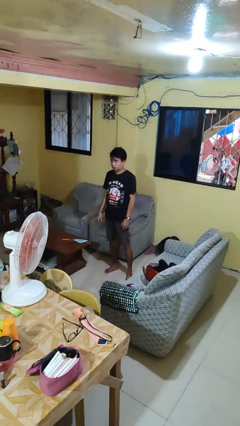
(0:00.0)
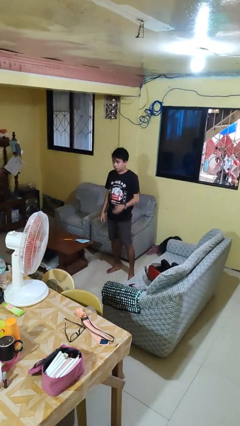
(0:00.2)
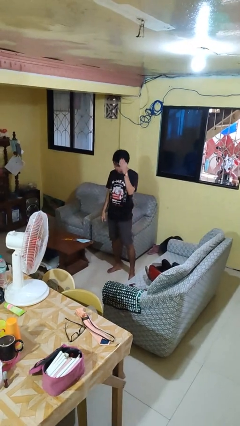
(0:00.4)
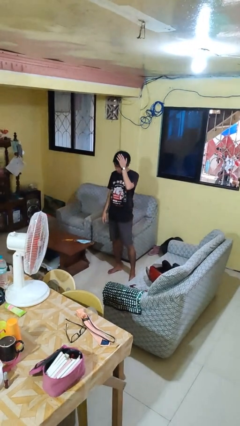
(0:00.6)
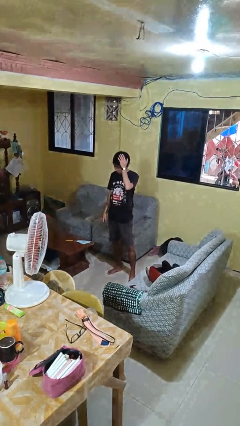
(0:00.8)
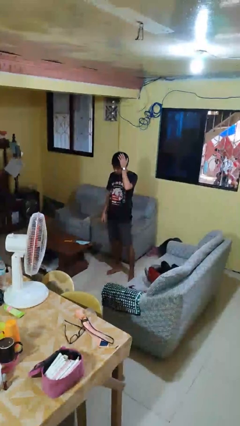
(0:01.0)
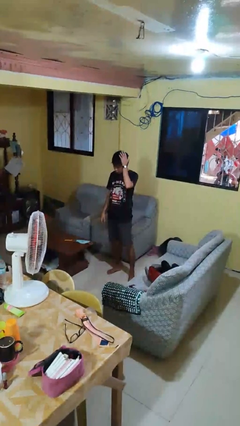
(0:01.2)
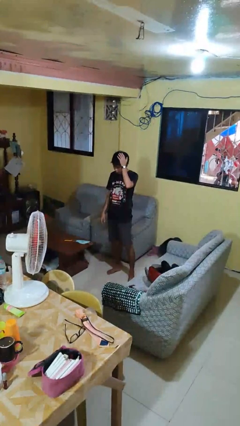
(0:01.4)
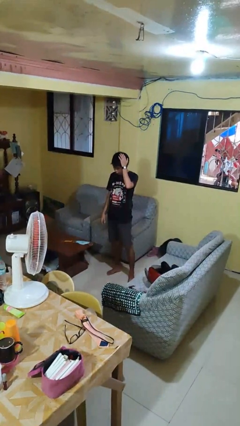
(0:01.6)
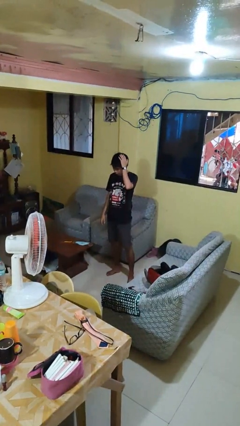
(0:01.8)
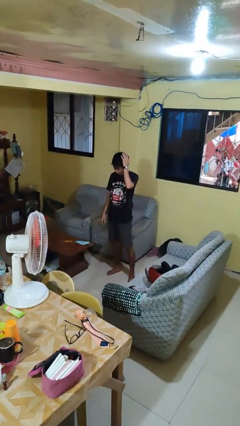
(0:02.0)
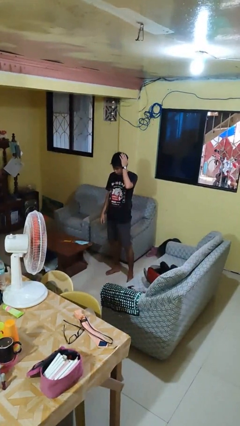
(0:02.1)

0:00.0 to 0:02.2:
person pats head

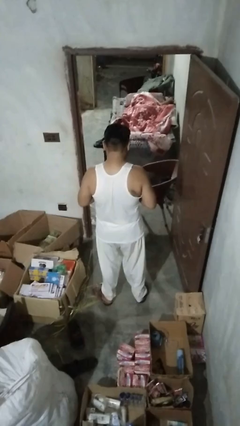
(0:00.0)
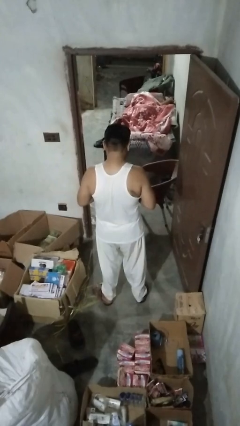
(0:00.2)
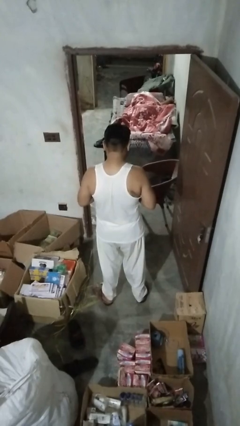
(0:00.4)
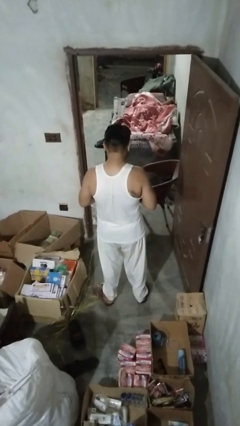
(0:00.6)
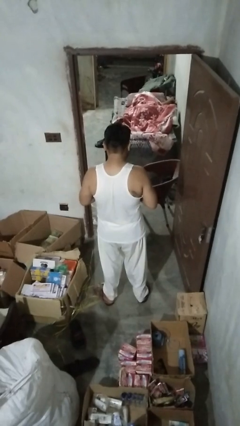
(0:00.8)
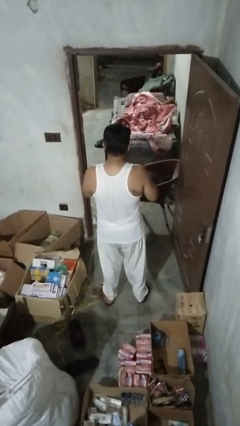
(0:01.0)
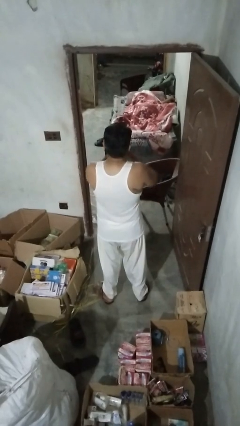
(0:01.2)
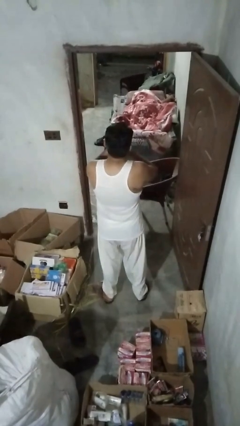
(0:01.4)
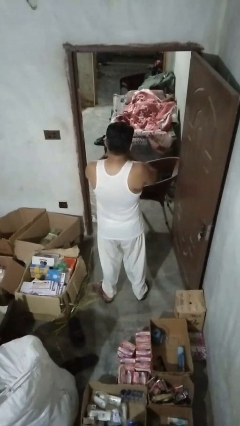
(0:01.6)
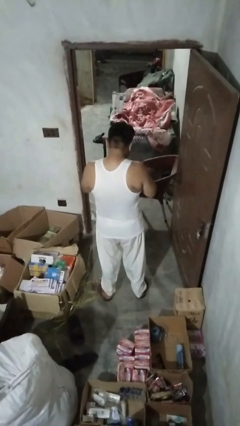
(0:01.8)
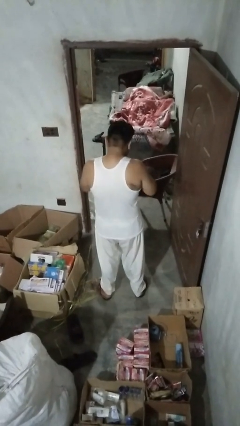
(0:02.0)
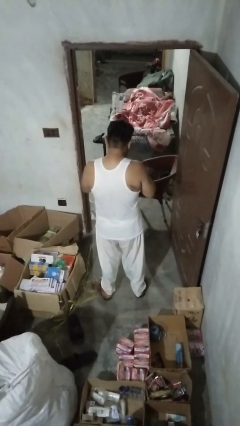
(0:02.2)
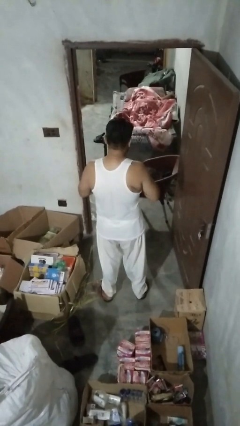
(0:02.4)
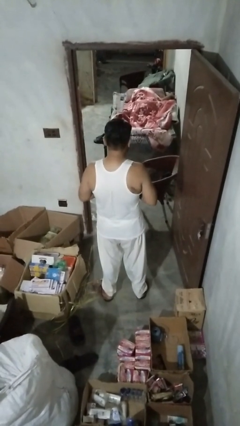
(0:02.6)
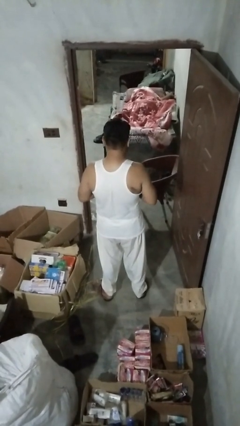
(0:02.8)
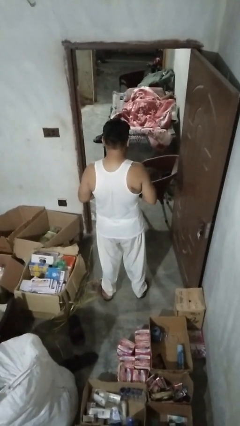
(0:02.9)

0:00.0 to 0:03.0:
person sneezes into hand

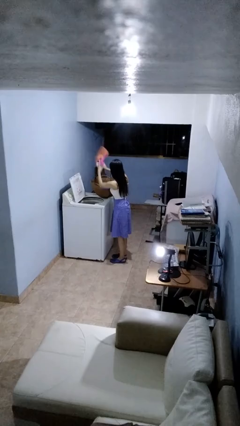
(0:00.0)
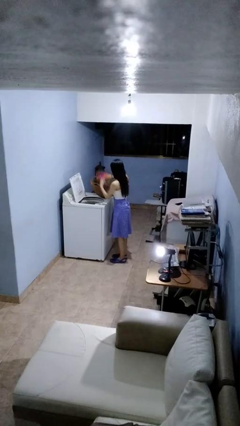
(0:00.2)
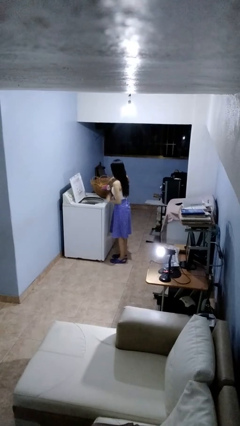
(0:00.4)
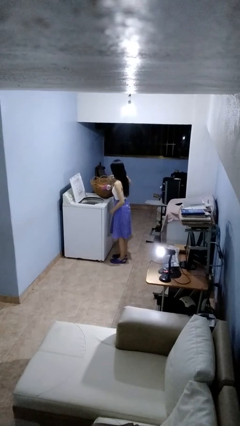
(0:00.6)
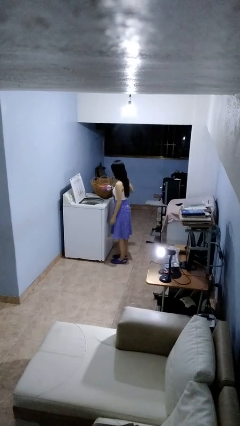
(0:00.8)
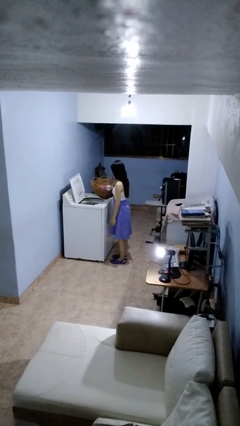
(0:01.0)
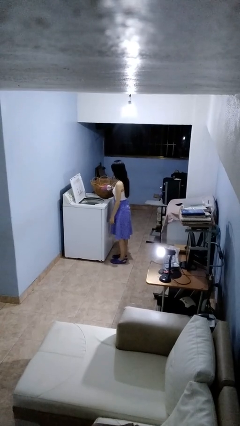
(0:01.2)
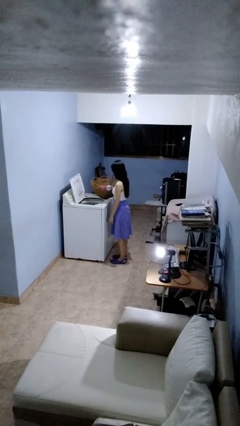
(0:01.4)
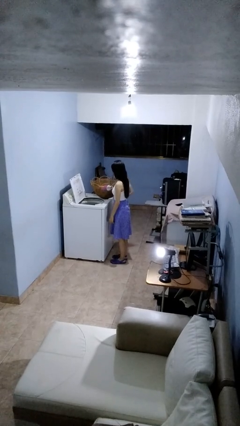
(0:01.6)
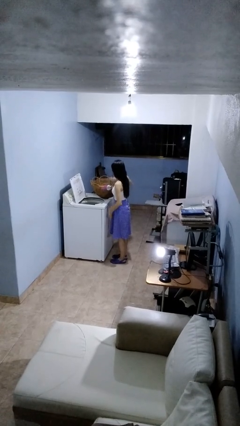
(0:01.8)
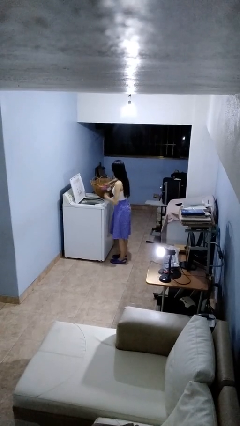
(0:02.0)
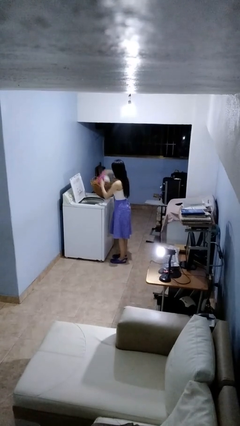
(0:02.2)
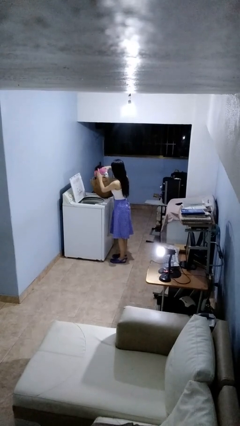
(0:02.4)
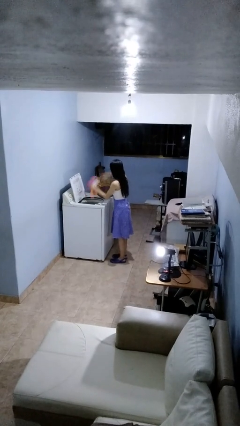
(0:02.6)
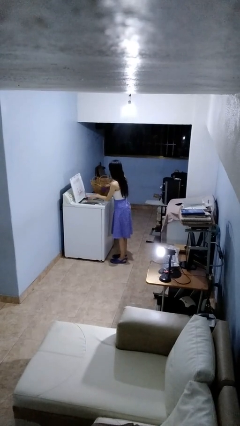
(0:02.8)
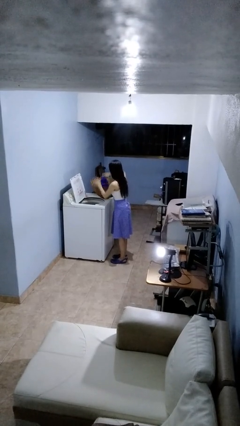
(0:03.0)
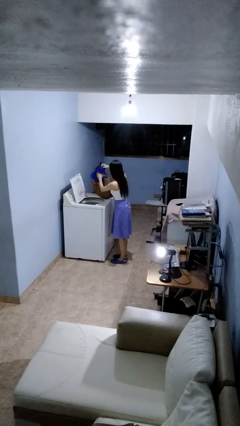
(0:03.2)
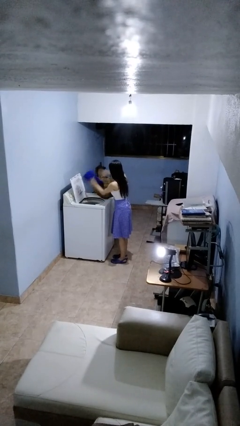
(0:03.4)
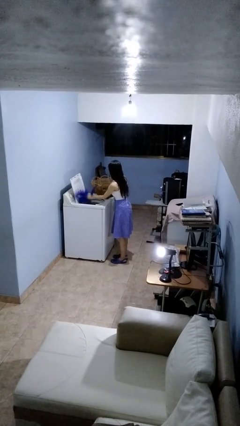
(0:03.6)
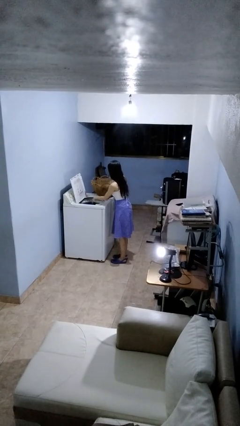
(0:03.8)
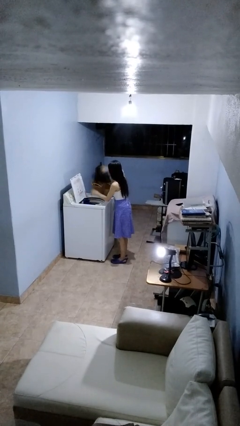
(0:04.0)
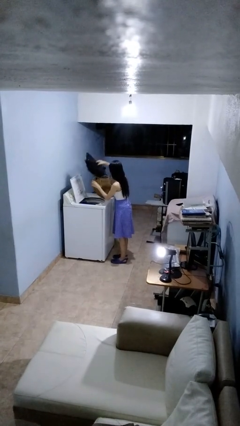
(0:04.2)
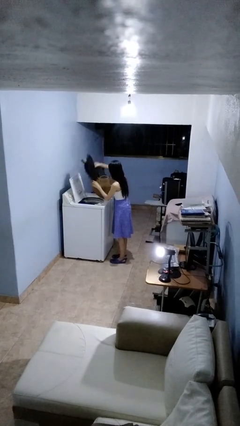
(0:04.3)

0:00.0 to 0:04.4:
person loads clotheswasher

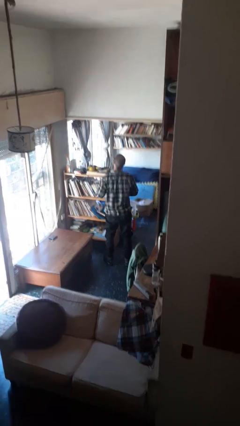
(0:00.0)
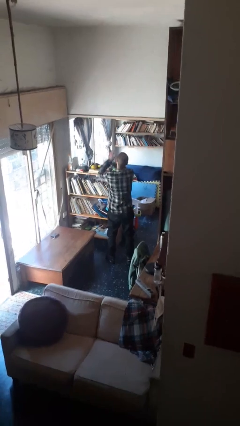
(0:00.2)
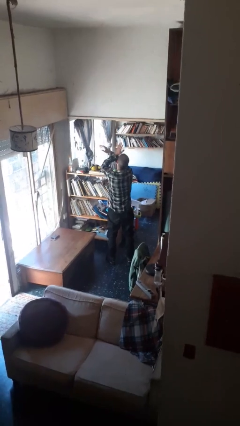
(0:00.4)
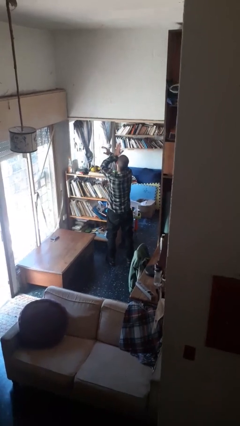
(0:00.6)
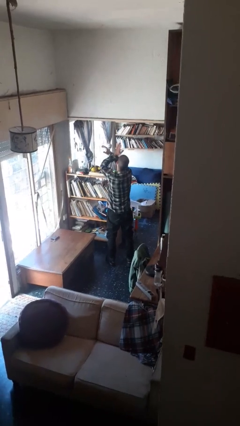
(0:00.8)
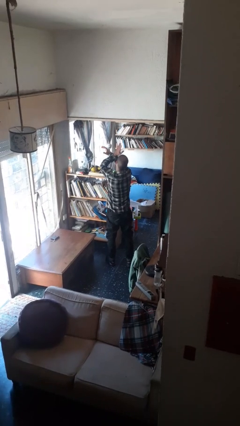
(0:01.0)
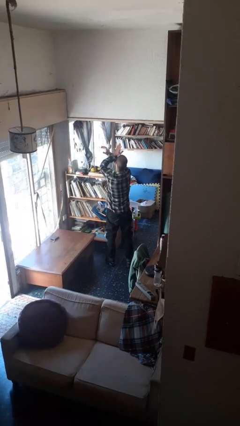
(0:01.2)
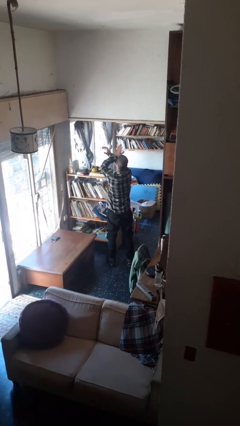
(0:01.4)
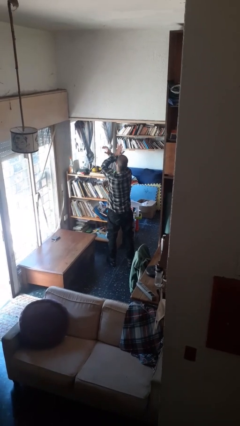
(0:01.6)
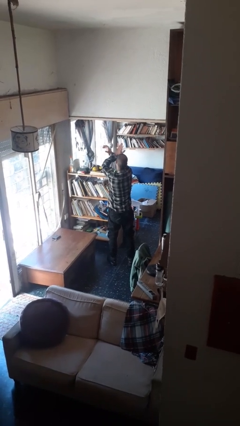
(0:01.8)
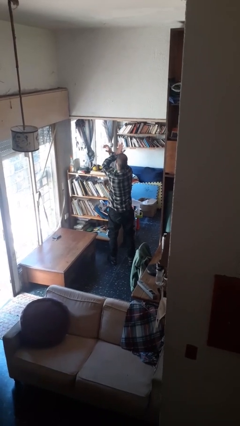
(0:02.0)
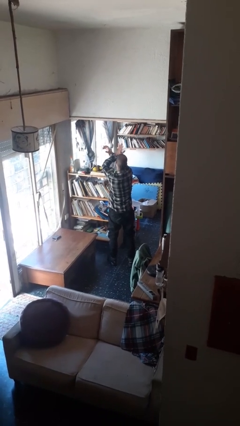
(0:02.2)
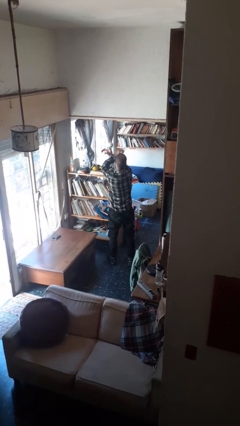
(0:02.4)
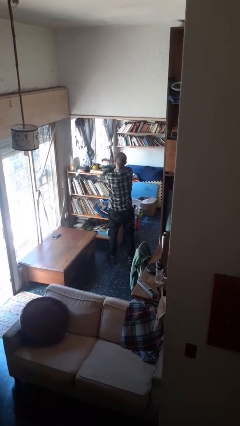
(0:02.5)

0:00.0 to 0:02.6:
person gestures arms x

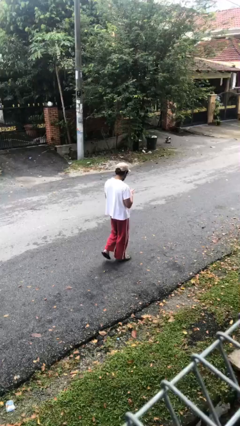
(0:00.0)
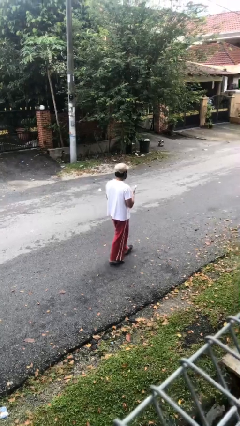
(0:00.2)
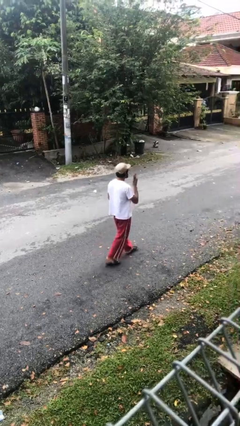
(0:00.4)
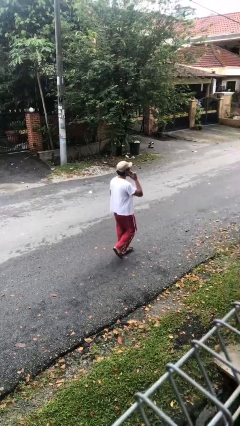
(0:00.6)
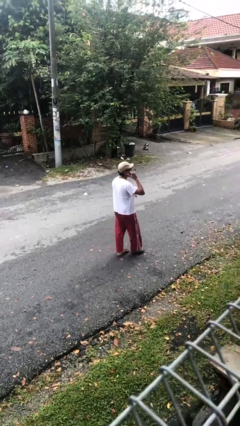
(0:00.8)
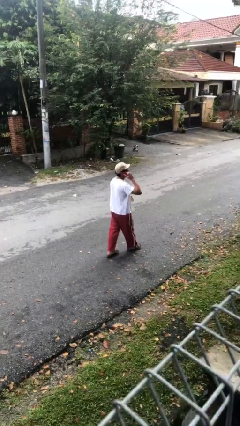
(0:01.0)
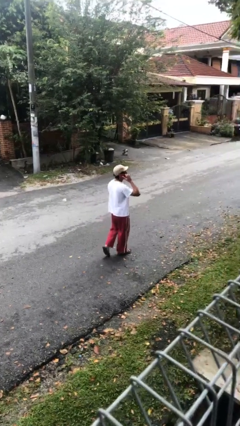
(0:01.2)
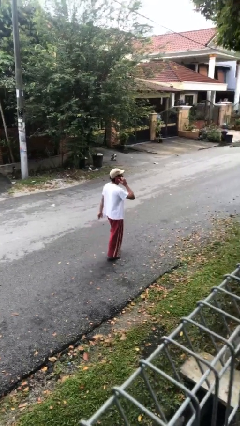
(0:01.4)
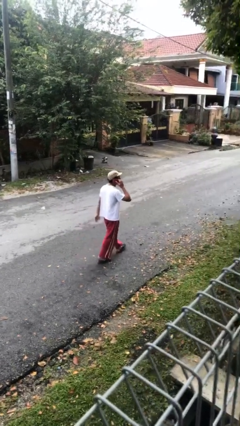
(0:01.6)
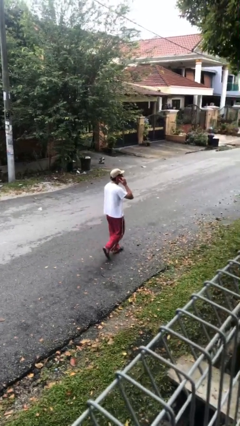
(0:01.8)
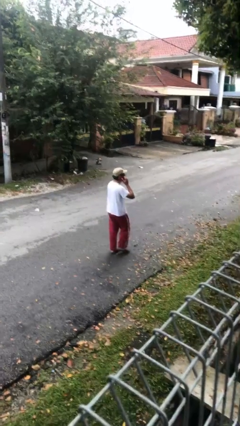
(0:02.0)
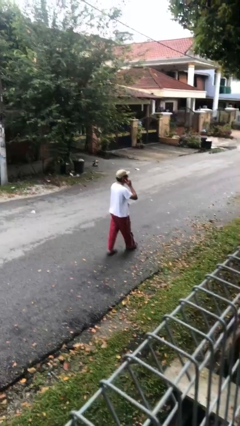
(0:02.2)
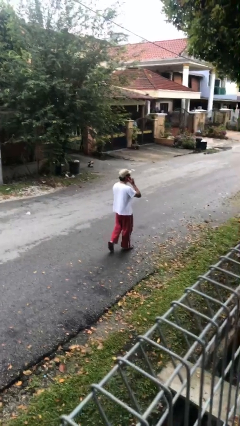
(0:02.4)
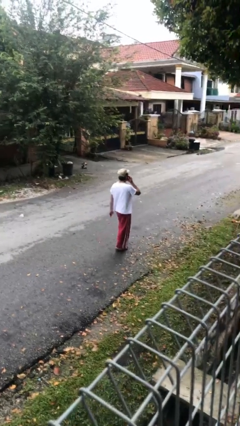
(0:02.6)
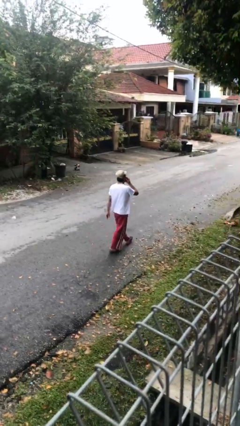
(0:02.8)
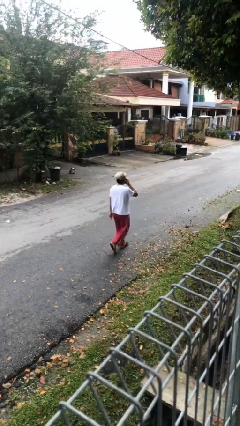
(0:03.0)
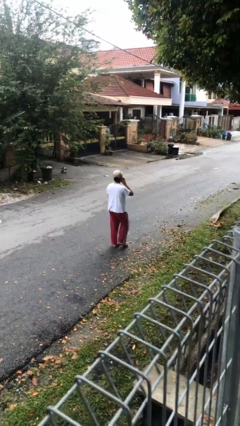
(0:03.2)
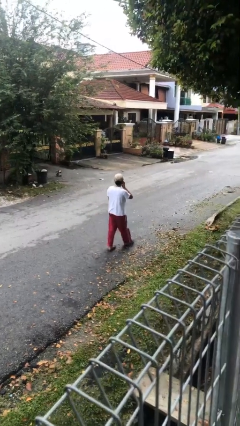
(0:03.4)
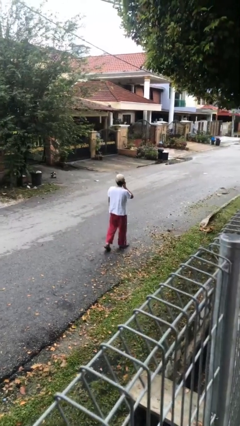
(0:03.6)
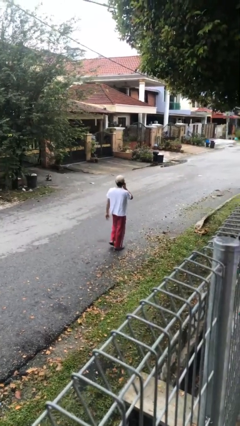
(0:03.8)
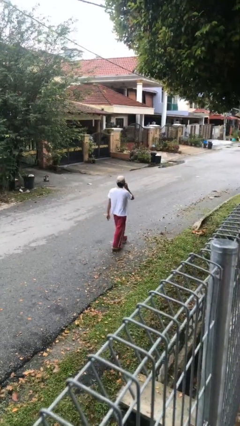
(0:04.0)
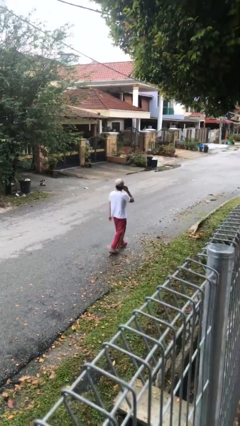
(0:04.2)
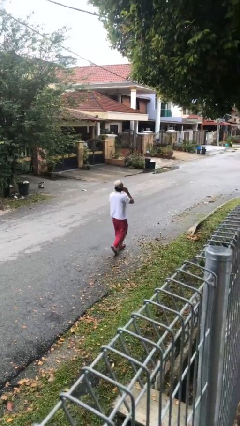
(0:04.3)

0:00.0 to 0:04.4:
person talks on phone

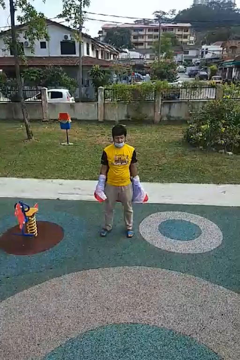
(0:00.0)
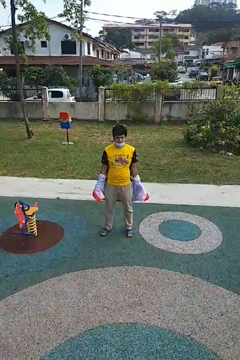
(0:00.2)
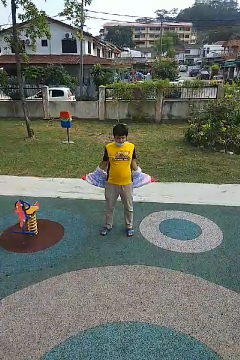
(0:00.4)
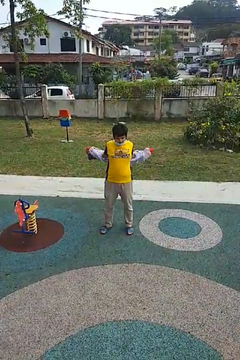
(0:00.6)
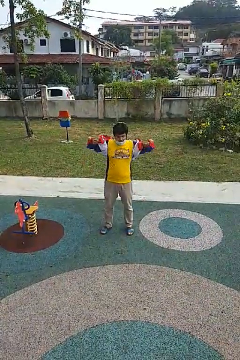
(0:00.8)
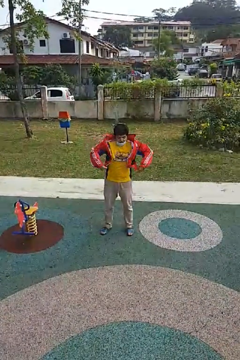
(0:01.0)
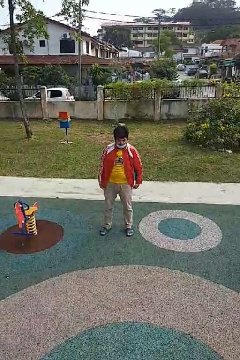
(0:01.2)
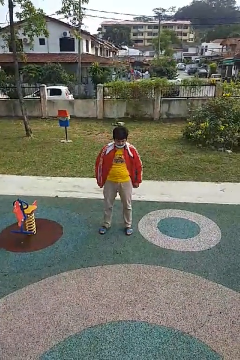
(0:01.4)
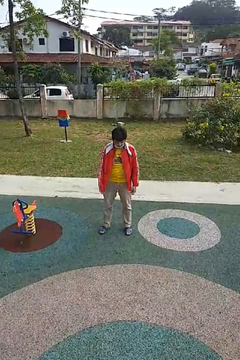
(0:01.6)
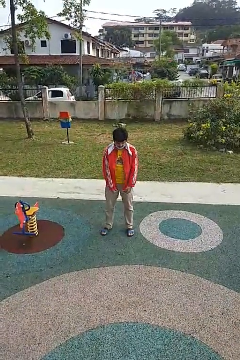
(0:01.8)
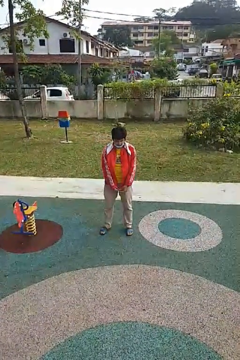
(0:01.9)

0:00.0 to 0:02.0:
person puts on jacket
